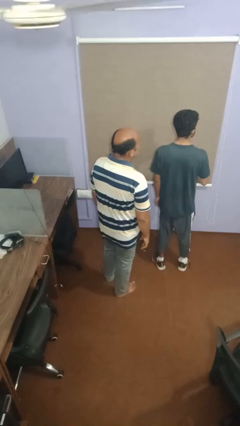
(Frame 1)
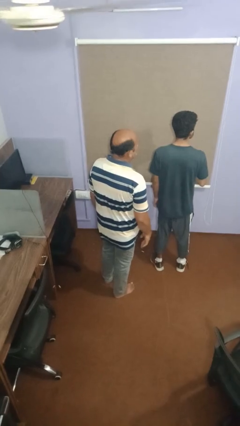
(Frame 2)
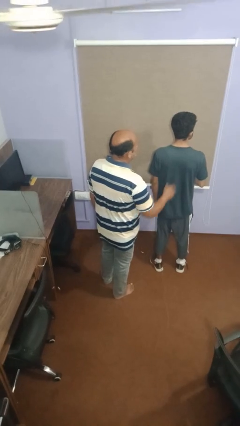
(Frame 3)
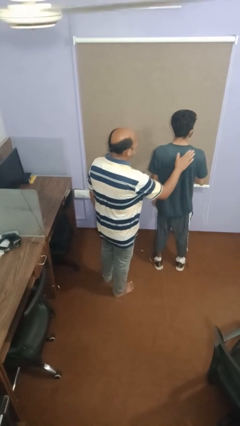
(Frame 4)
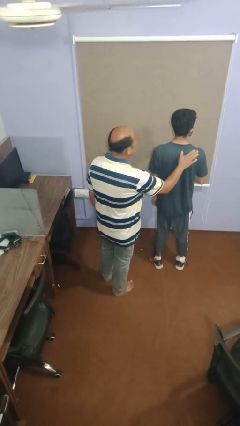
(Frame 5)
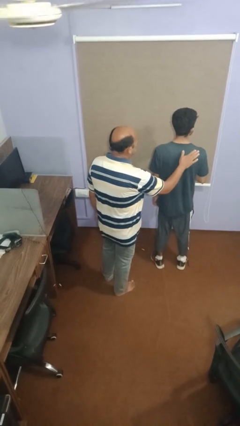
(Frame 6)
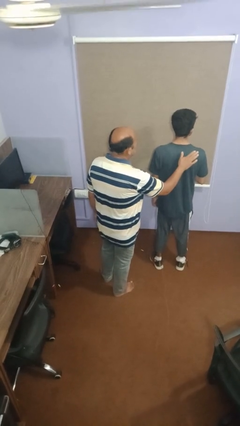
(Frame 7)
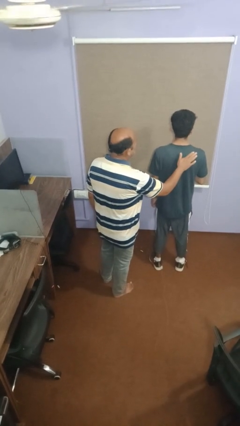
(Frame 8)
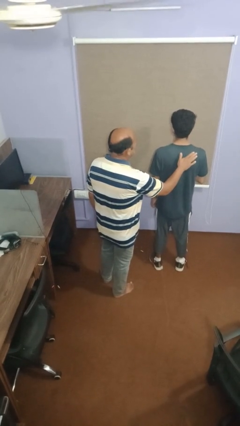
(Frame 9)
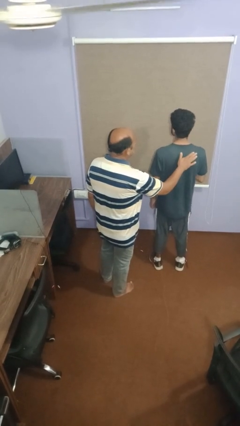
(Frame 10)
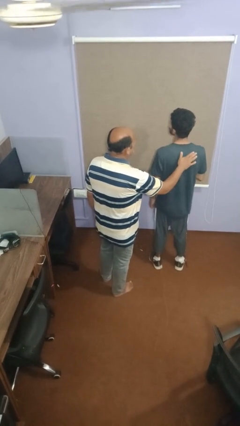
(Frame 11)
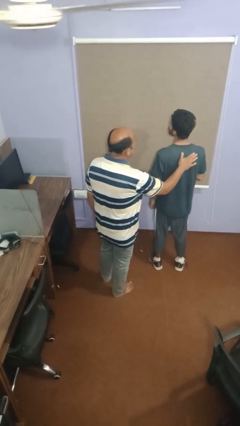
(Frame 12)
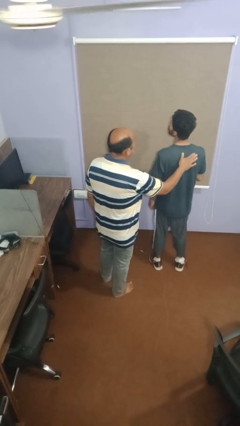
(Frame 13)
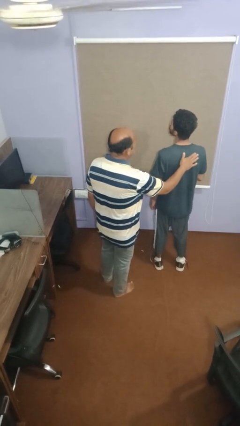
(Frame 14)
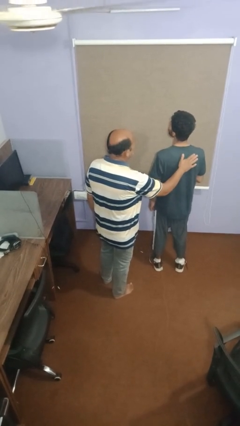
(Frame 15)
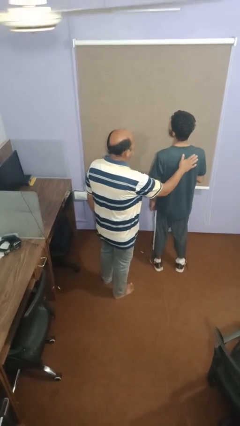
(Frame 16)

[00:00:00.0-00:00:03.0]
person touches back of person

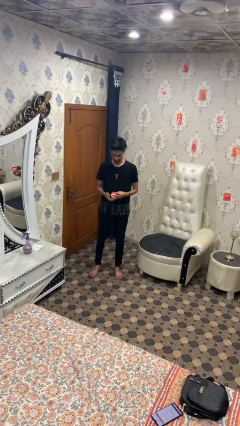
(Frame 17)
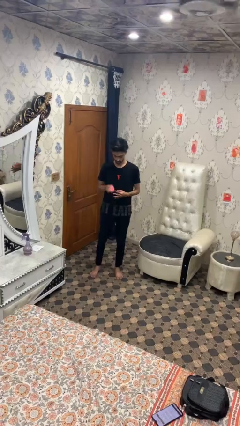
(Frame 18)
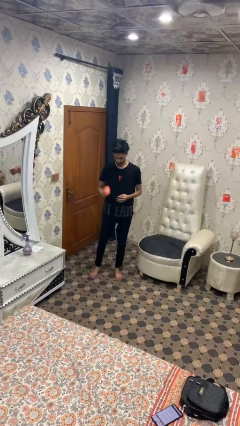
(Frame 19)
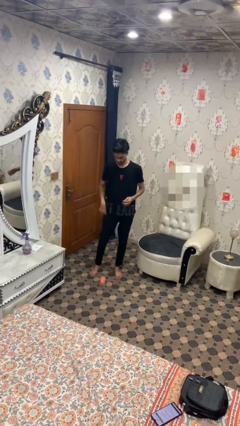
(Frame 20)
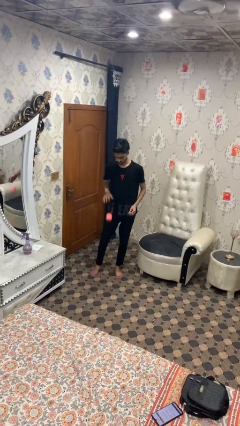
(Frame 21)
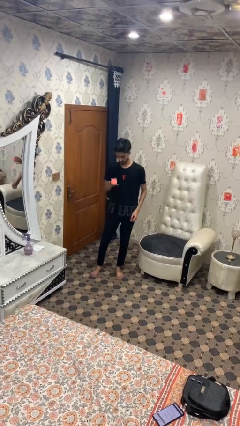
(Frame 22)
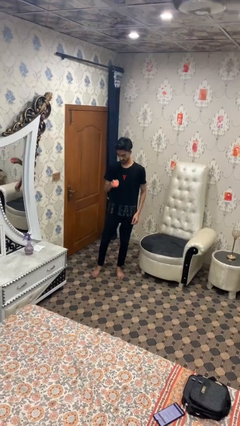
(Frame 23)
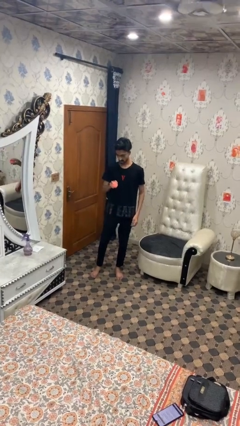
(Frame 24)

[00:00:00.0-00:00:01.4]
person bounces ball on floor

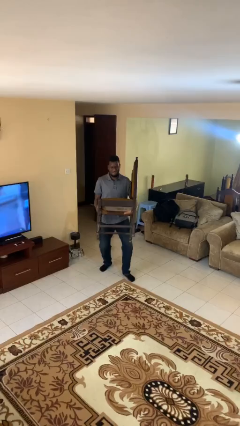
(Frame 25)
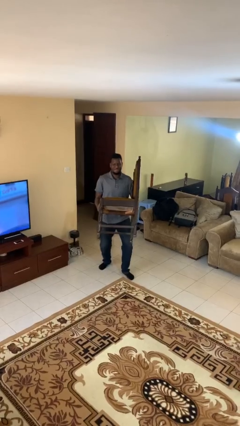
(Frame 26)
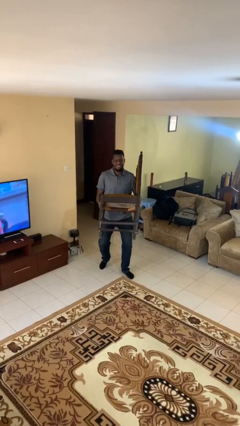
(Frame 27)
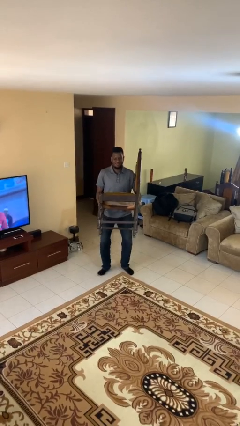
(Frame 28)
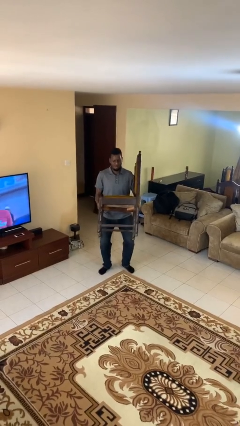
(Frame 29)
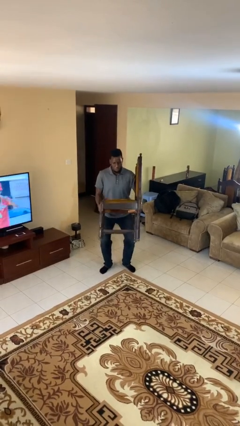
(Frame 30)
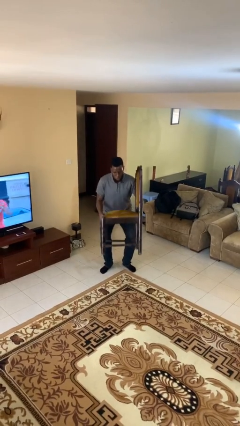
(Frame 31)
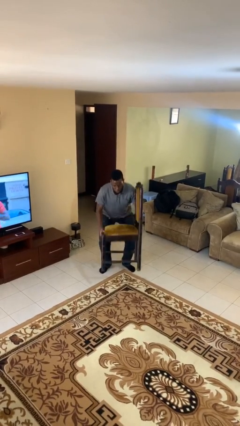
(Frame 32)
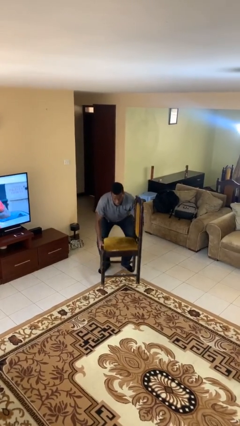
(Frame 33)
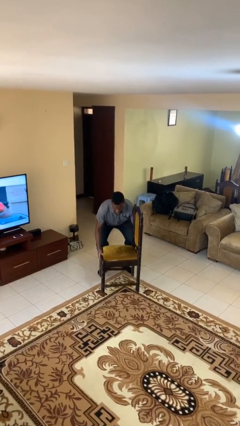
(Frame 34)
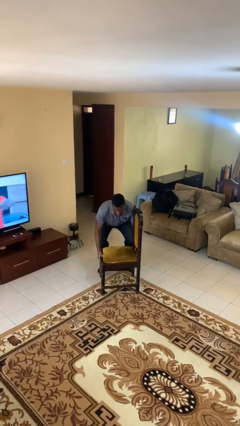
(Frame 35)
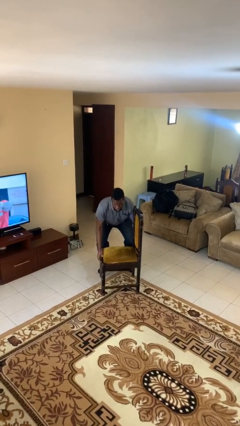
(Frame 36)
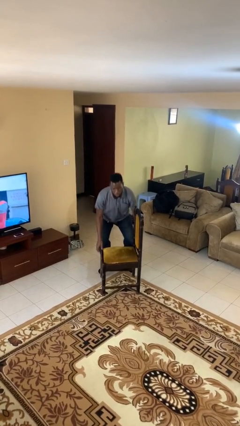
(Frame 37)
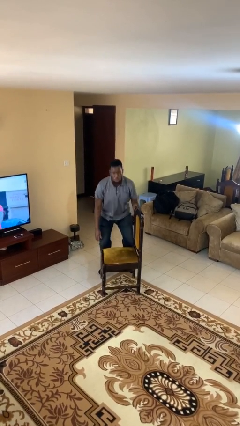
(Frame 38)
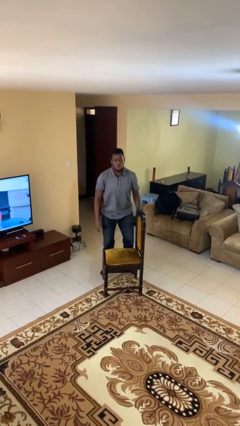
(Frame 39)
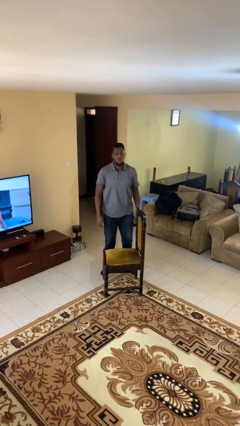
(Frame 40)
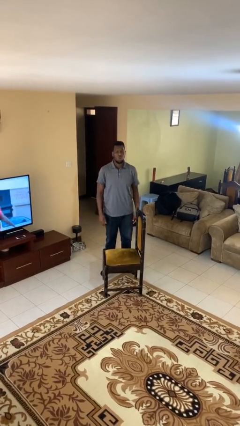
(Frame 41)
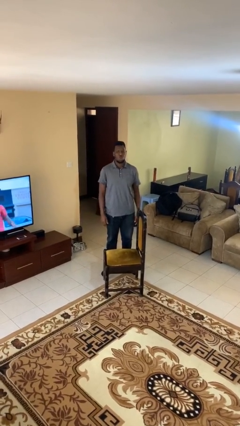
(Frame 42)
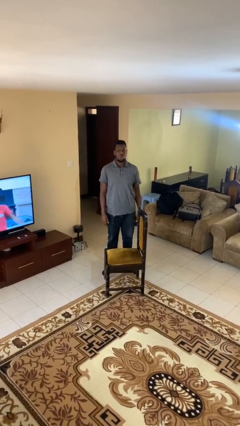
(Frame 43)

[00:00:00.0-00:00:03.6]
person puts down object on floor

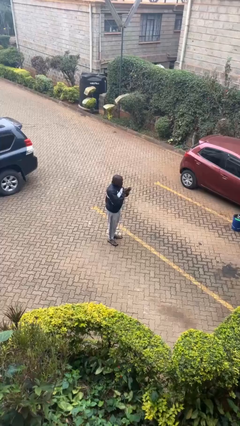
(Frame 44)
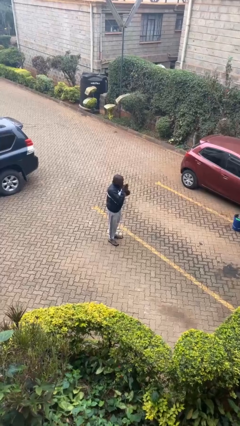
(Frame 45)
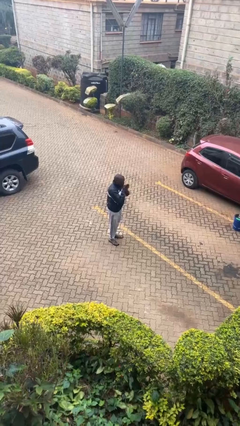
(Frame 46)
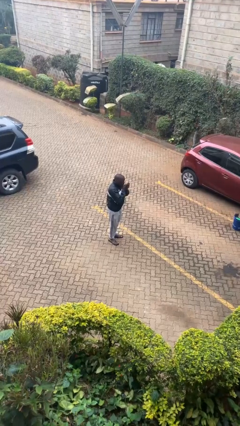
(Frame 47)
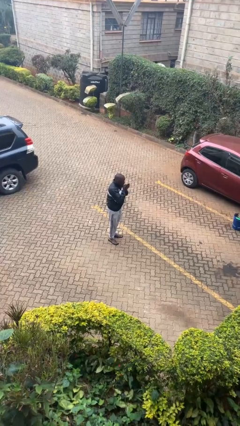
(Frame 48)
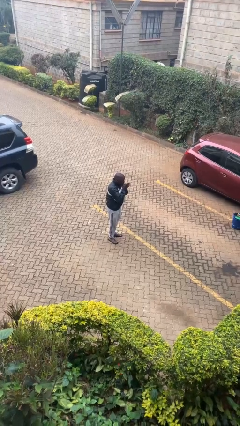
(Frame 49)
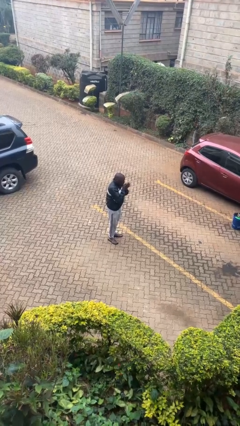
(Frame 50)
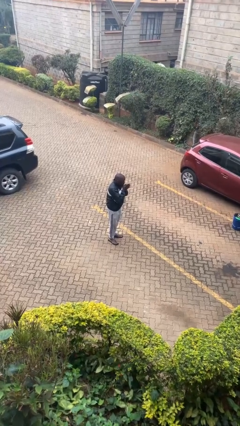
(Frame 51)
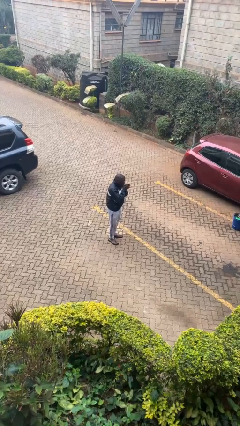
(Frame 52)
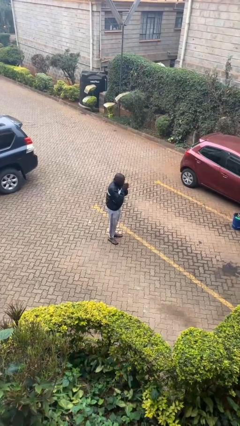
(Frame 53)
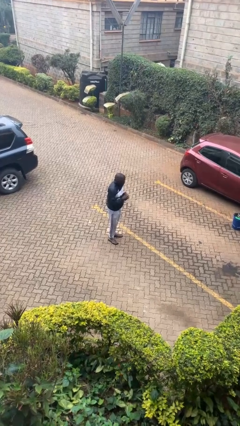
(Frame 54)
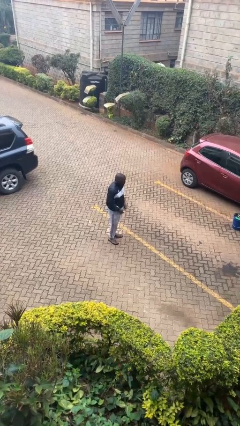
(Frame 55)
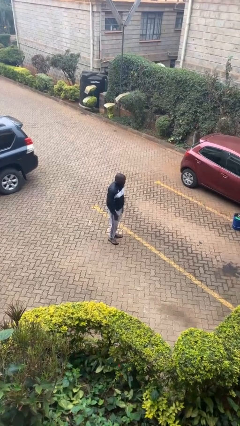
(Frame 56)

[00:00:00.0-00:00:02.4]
person blows into hands

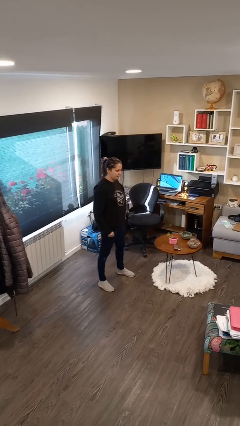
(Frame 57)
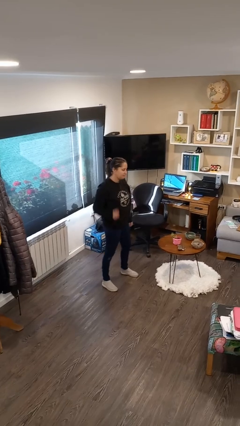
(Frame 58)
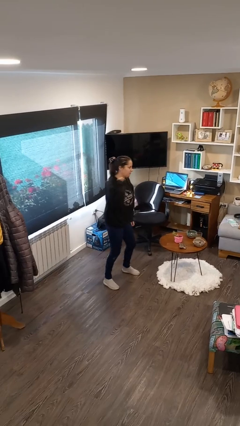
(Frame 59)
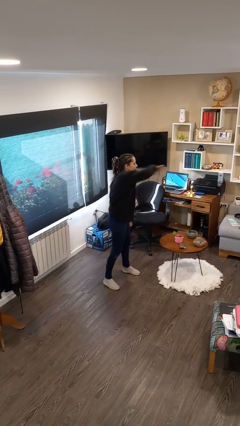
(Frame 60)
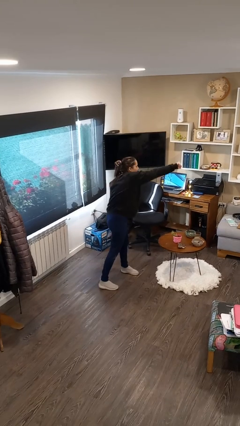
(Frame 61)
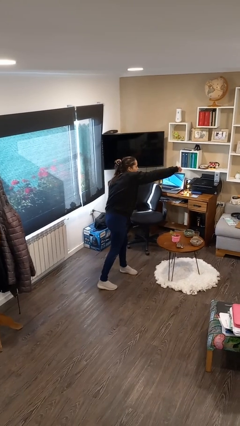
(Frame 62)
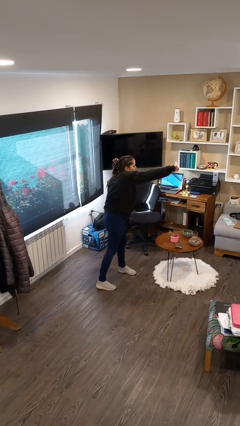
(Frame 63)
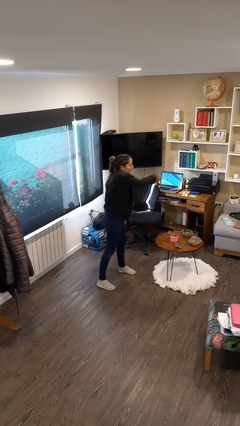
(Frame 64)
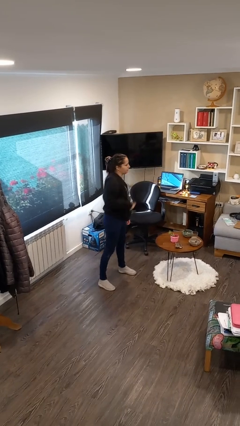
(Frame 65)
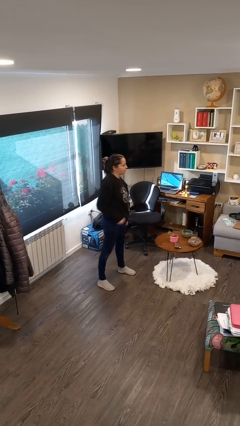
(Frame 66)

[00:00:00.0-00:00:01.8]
person punches

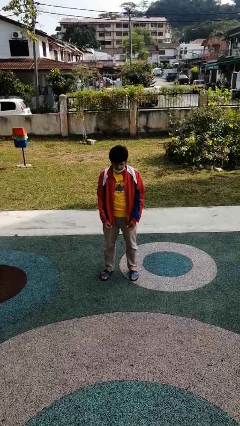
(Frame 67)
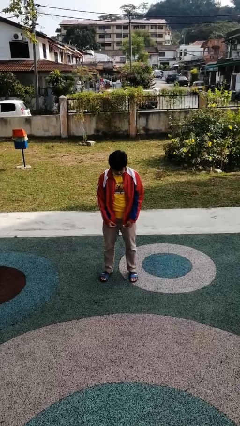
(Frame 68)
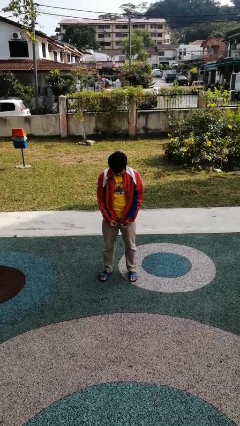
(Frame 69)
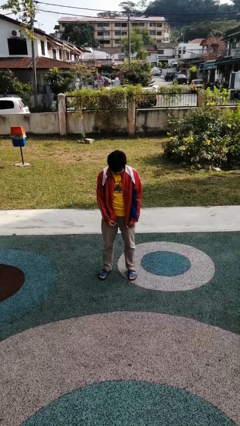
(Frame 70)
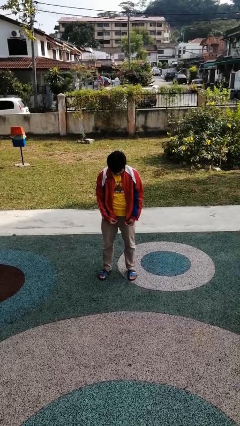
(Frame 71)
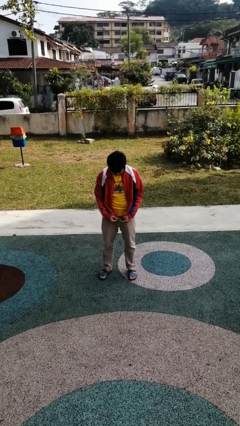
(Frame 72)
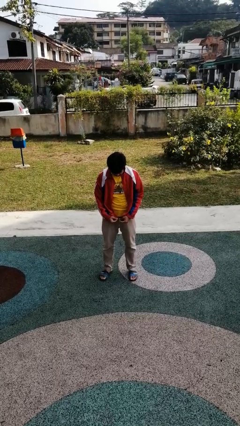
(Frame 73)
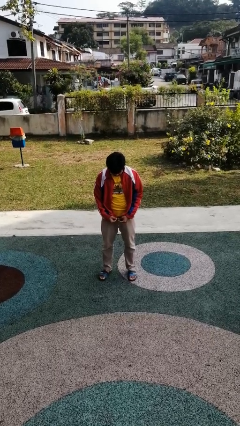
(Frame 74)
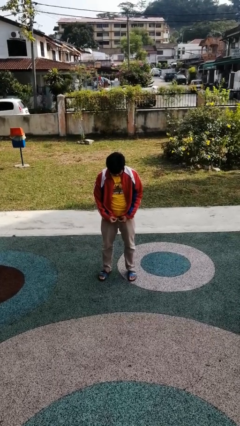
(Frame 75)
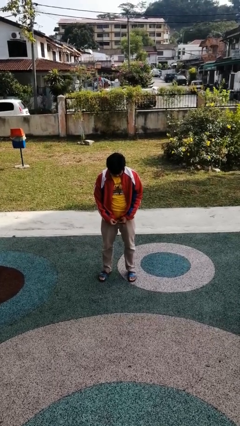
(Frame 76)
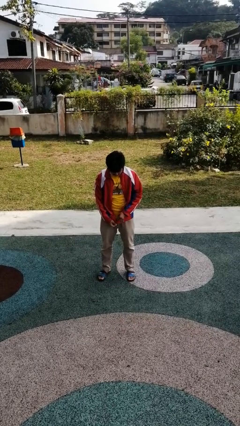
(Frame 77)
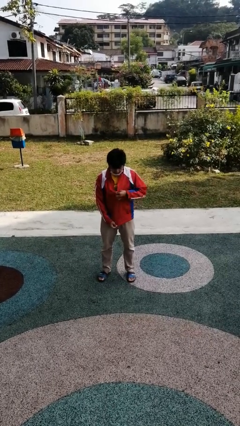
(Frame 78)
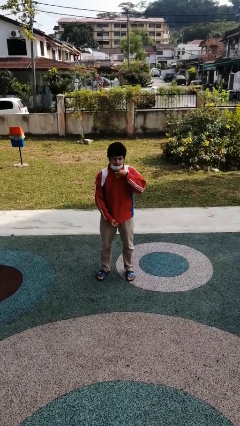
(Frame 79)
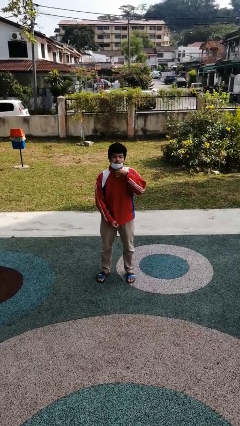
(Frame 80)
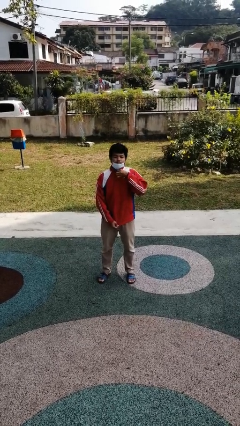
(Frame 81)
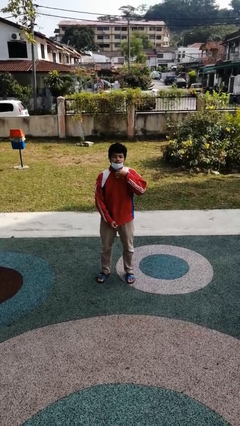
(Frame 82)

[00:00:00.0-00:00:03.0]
person zips up jacket

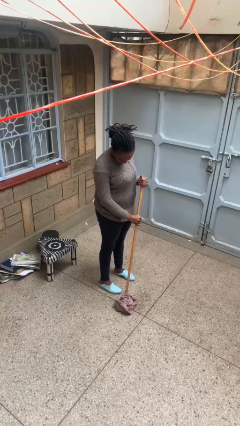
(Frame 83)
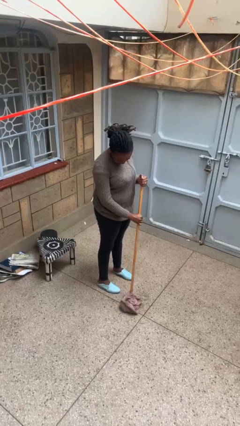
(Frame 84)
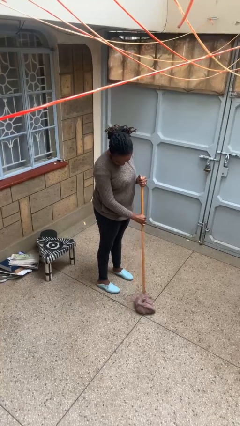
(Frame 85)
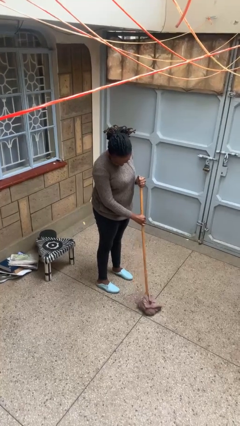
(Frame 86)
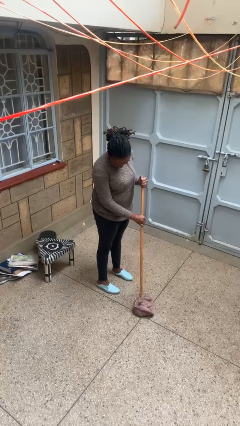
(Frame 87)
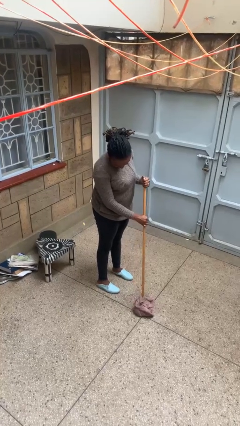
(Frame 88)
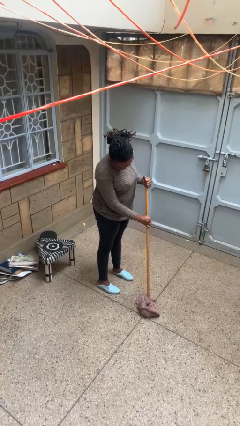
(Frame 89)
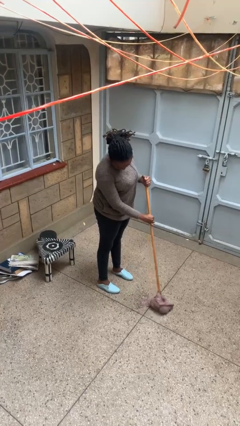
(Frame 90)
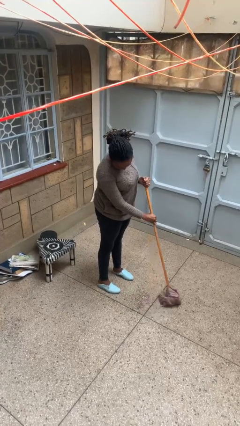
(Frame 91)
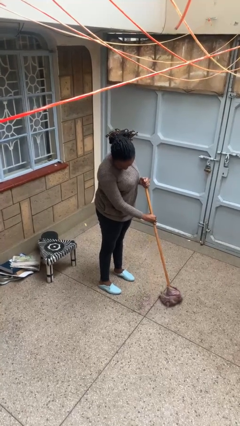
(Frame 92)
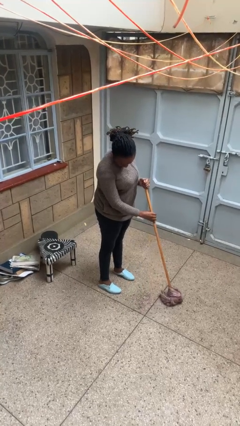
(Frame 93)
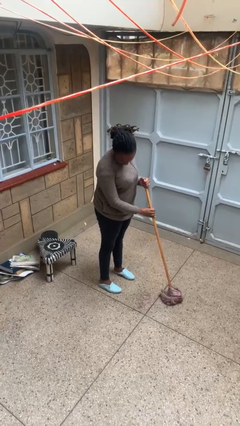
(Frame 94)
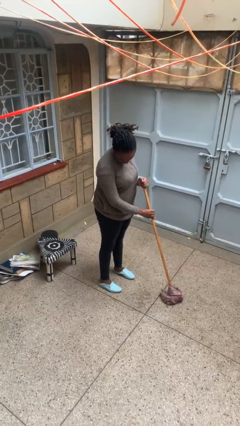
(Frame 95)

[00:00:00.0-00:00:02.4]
person mops
